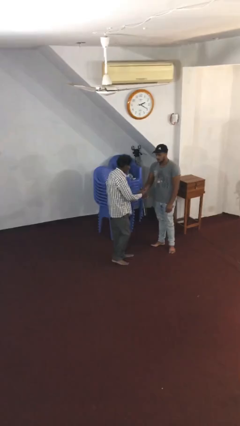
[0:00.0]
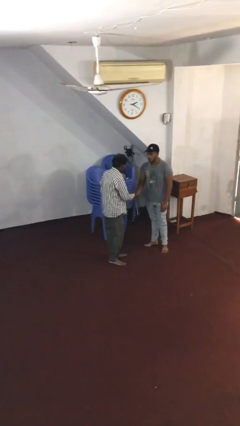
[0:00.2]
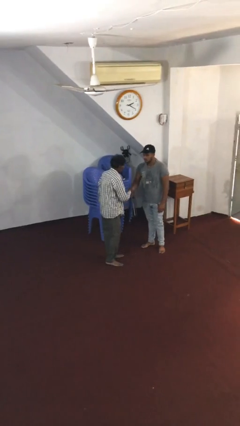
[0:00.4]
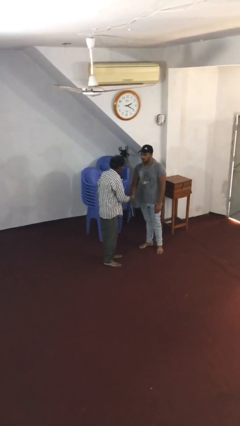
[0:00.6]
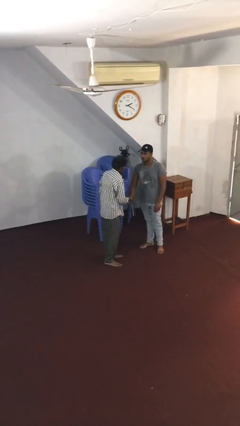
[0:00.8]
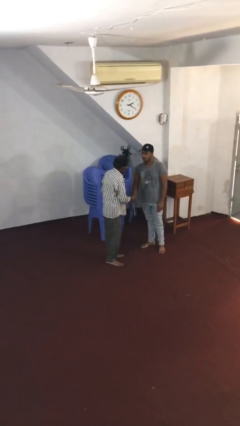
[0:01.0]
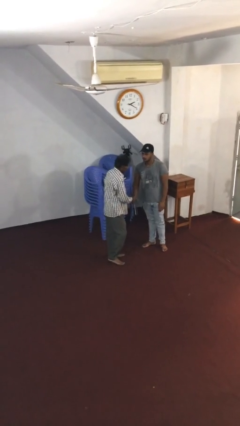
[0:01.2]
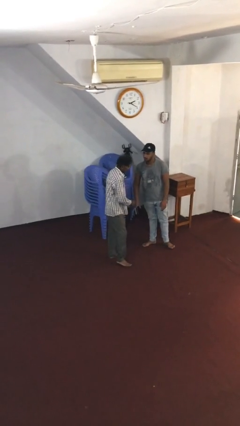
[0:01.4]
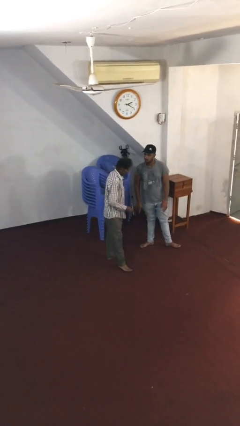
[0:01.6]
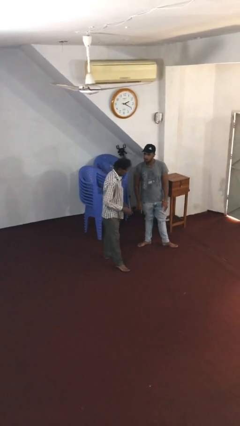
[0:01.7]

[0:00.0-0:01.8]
person shakes hand

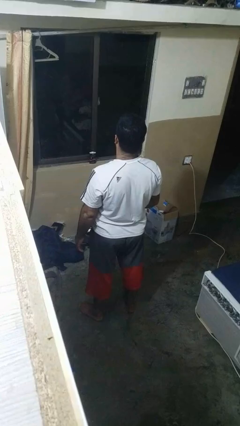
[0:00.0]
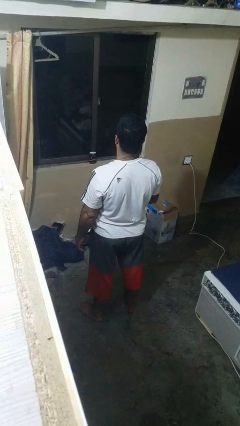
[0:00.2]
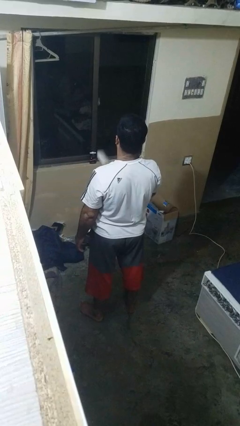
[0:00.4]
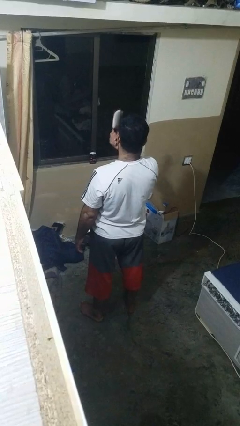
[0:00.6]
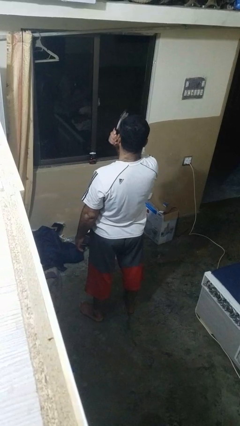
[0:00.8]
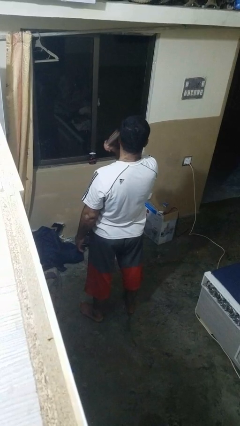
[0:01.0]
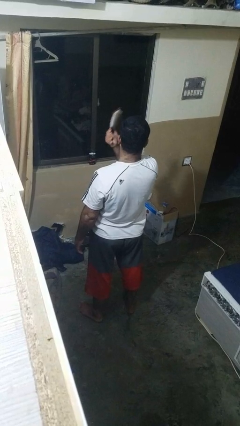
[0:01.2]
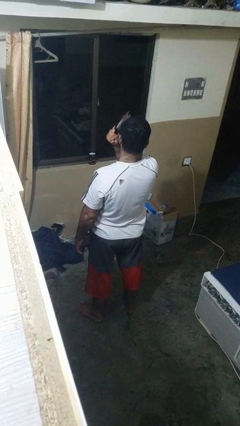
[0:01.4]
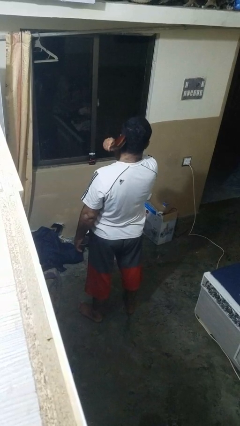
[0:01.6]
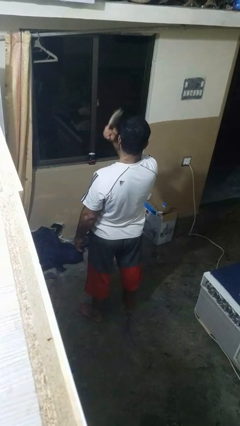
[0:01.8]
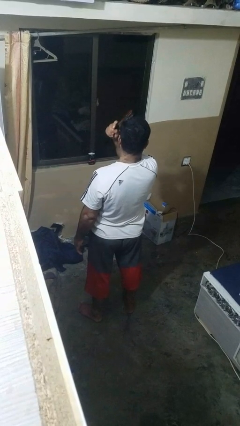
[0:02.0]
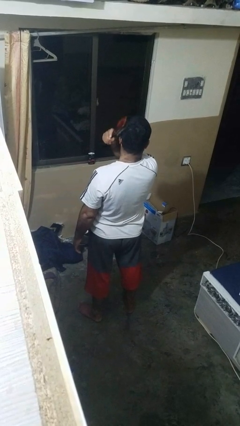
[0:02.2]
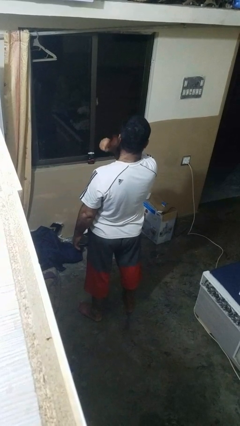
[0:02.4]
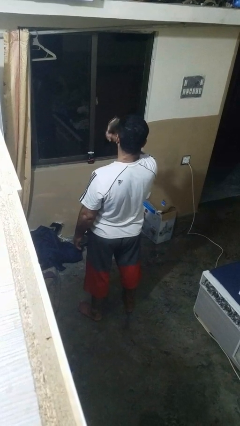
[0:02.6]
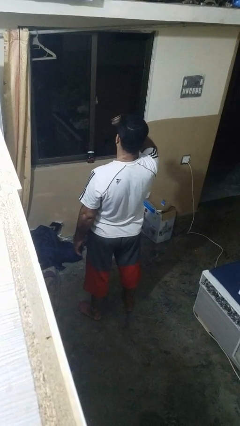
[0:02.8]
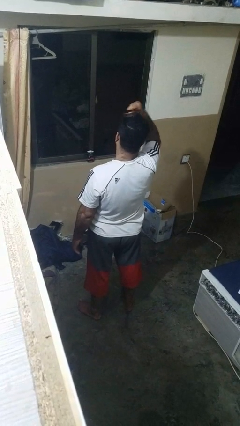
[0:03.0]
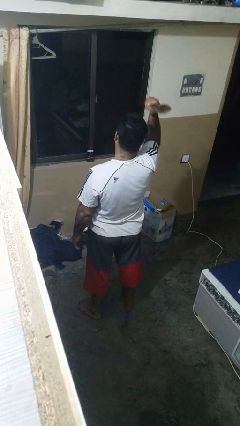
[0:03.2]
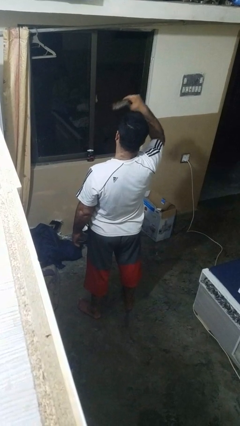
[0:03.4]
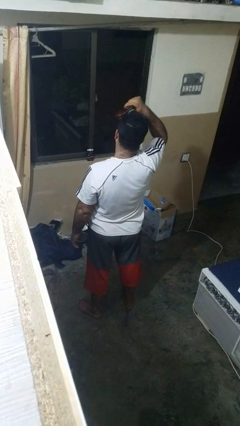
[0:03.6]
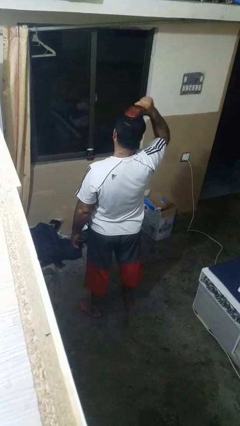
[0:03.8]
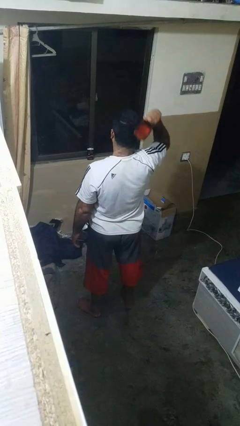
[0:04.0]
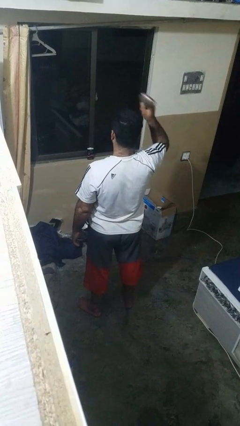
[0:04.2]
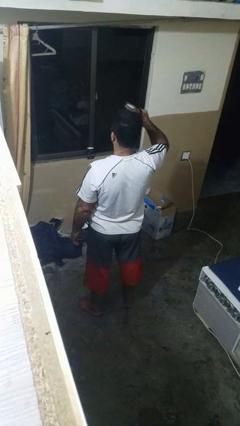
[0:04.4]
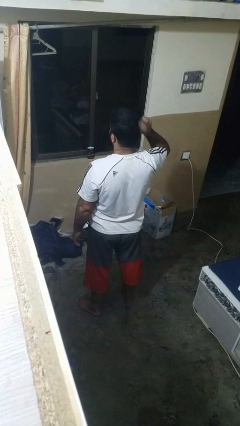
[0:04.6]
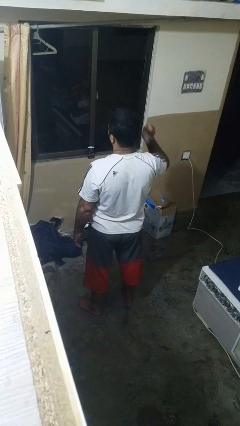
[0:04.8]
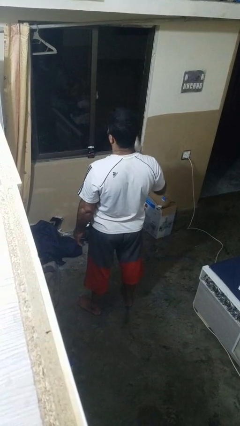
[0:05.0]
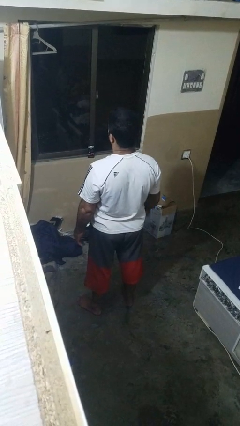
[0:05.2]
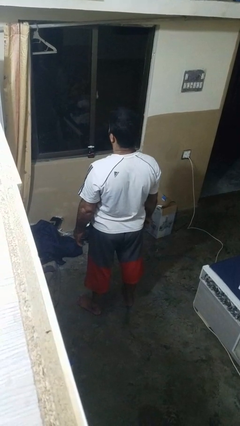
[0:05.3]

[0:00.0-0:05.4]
person brushes hair

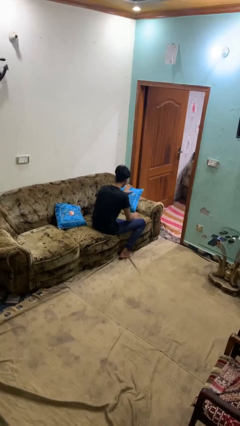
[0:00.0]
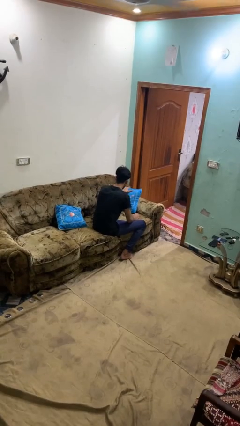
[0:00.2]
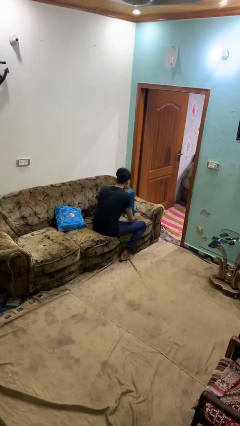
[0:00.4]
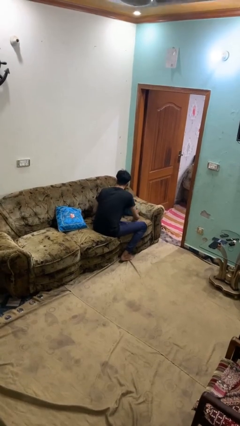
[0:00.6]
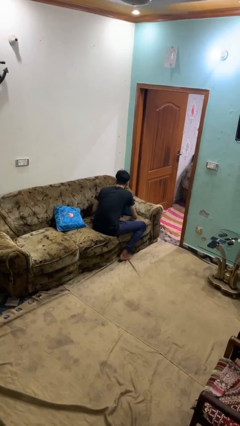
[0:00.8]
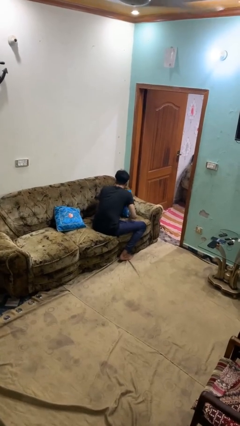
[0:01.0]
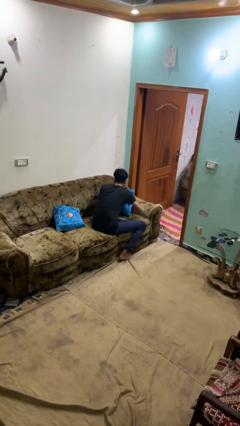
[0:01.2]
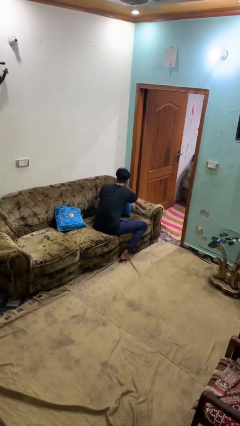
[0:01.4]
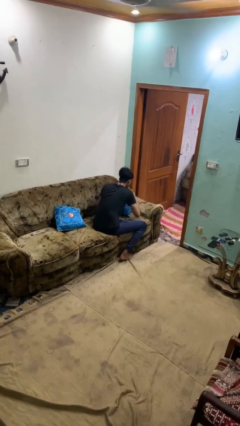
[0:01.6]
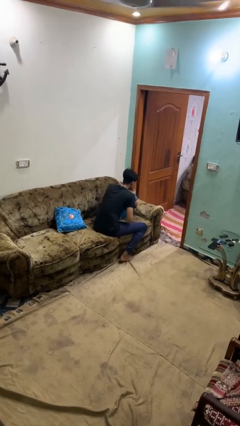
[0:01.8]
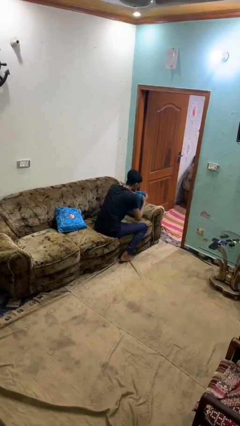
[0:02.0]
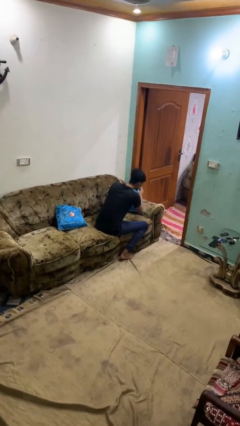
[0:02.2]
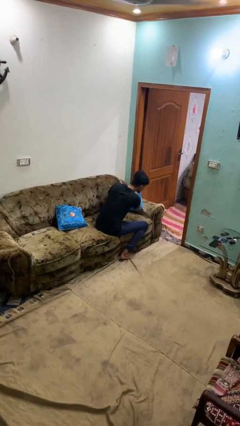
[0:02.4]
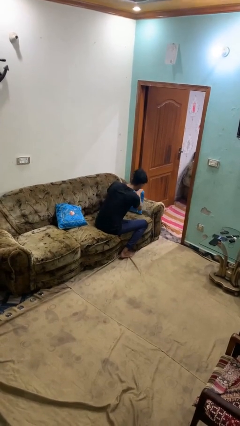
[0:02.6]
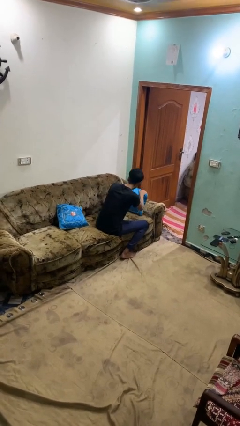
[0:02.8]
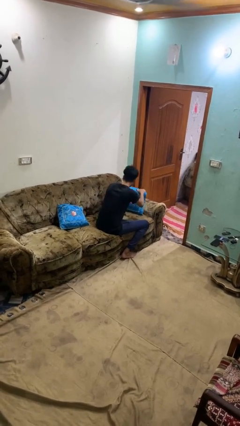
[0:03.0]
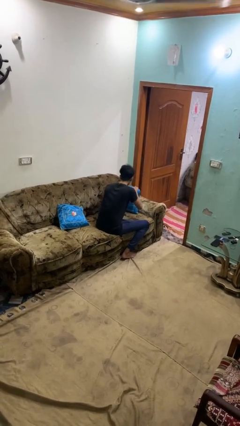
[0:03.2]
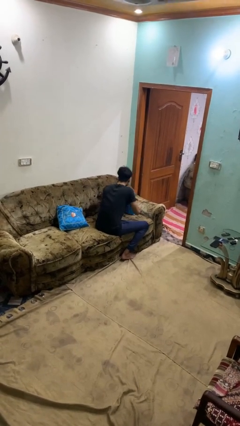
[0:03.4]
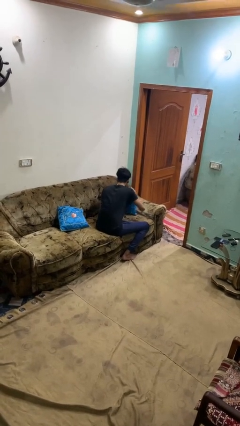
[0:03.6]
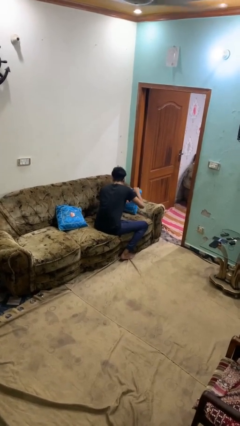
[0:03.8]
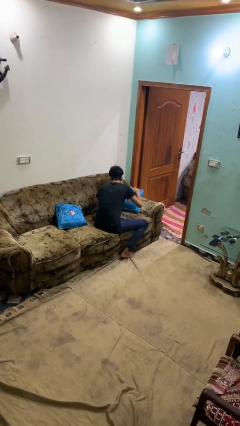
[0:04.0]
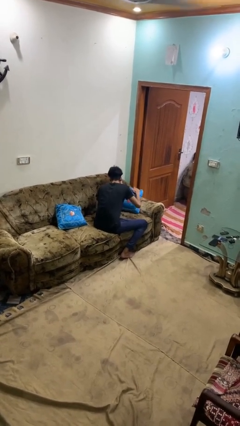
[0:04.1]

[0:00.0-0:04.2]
person searches in couch

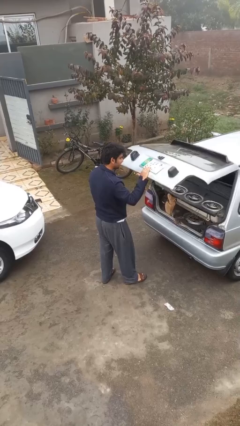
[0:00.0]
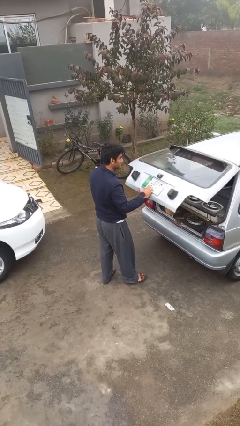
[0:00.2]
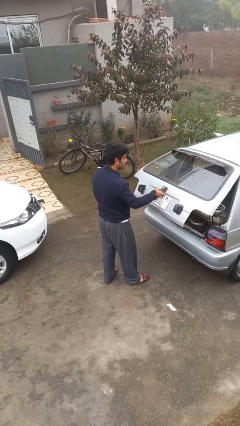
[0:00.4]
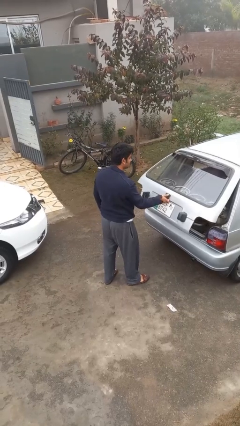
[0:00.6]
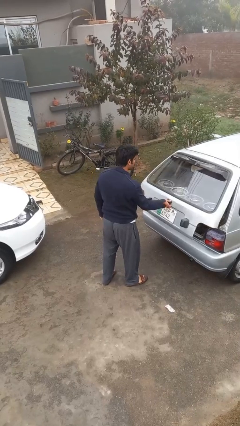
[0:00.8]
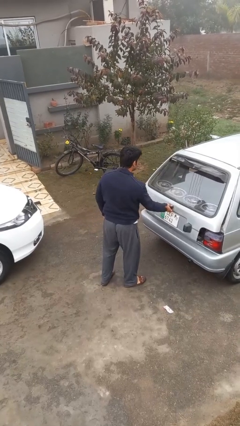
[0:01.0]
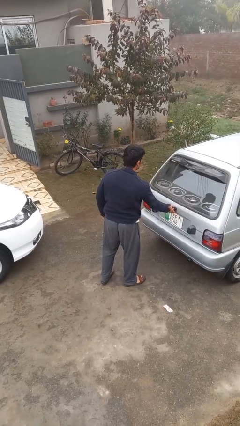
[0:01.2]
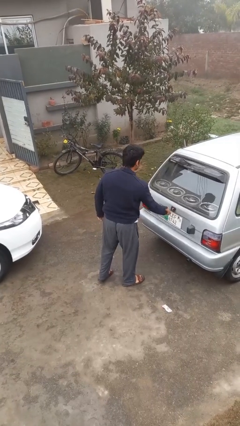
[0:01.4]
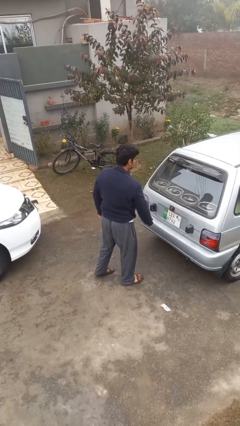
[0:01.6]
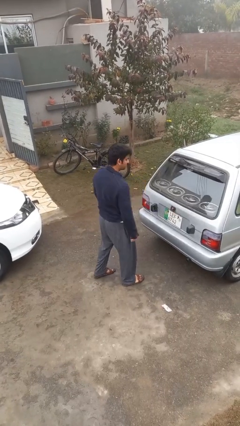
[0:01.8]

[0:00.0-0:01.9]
person closes car trunk

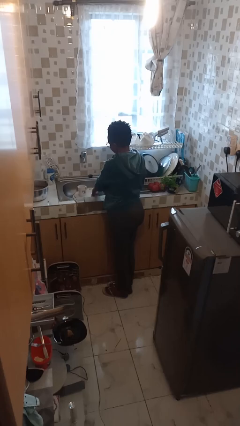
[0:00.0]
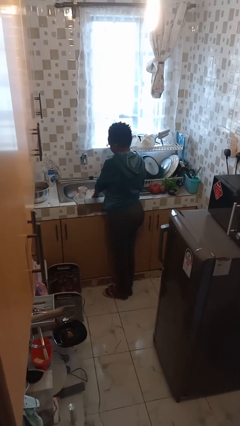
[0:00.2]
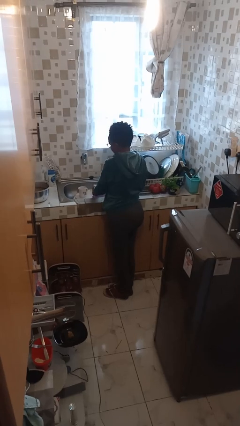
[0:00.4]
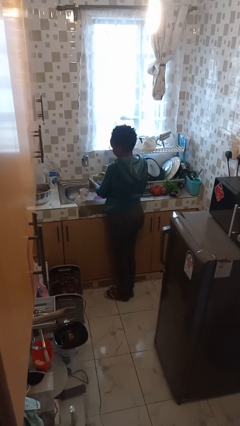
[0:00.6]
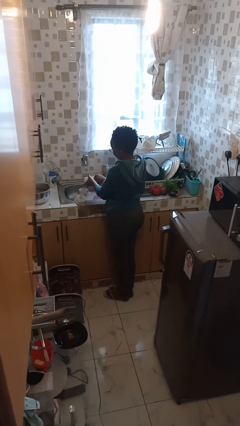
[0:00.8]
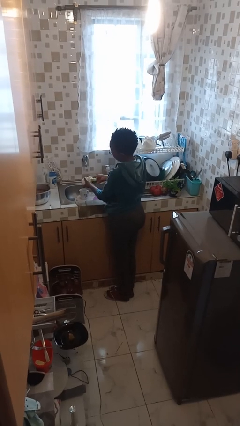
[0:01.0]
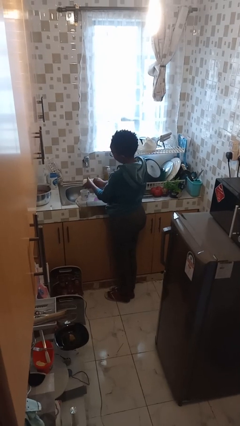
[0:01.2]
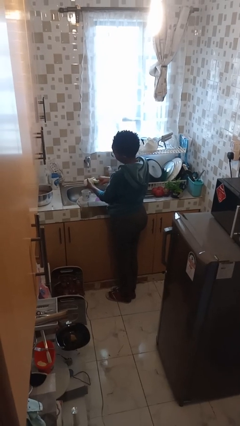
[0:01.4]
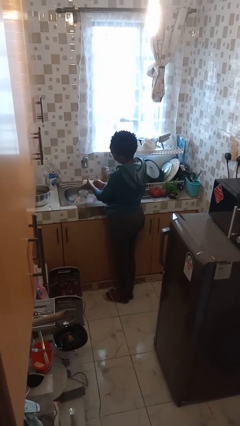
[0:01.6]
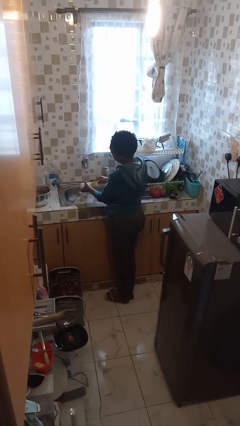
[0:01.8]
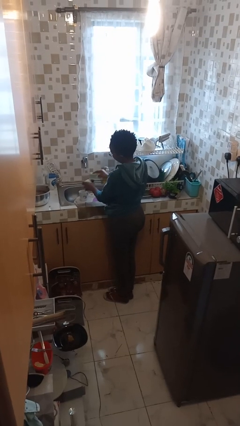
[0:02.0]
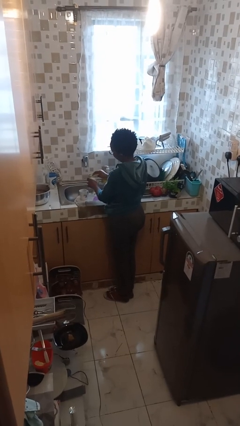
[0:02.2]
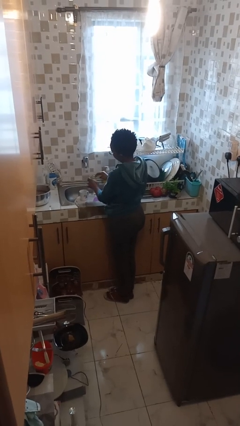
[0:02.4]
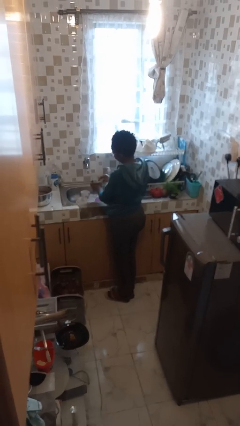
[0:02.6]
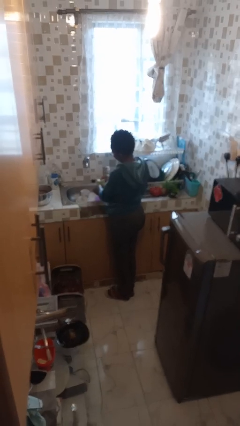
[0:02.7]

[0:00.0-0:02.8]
person washes dish

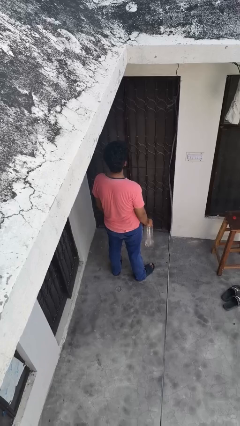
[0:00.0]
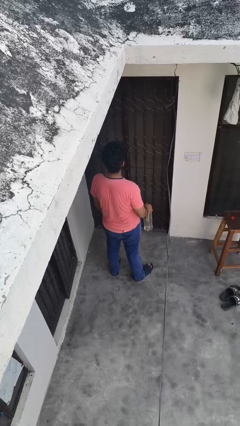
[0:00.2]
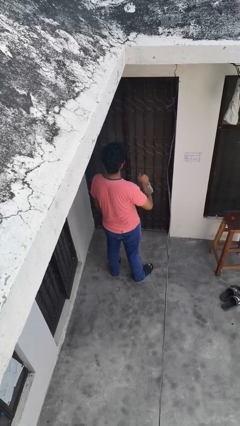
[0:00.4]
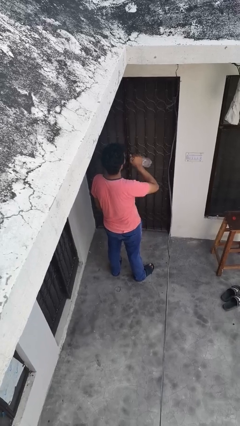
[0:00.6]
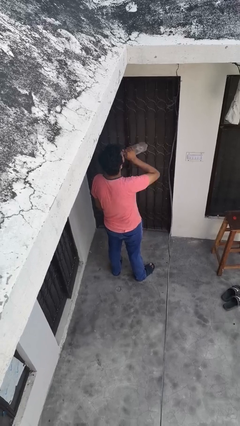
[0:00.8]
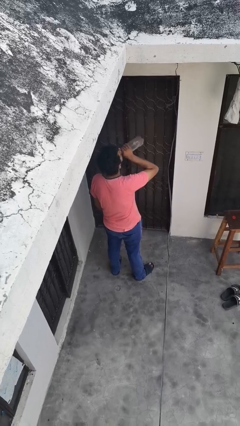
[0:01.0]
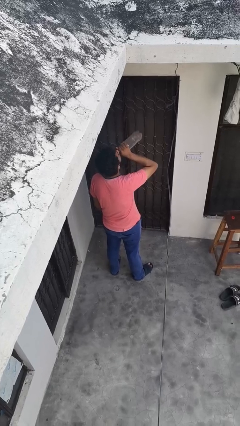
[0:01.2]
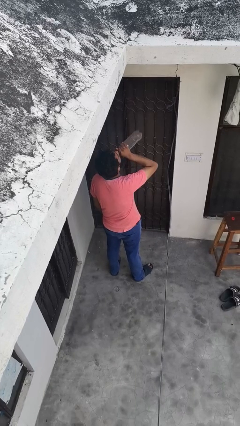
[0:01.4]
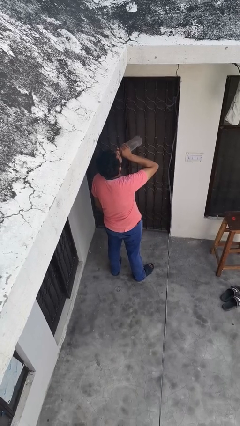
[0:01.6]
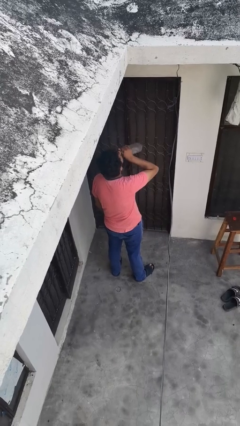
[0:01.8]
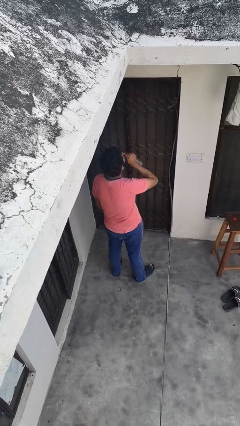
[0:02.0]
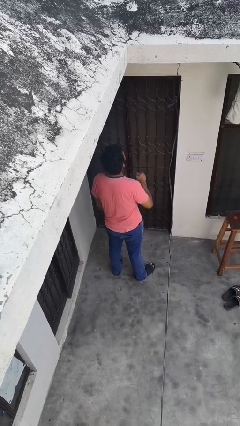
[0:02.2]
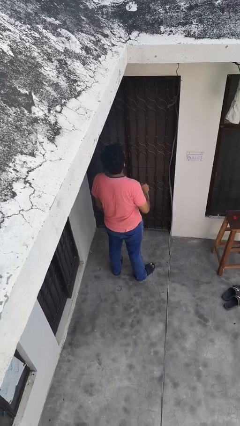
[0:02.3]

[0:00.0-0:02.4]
person drinks from bottle
